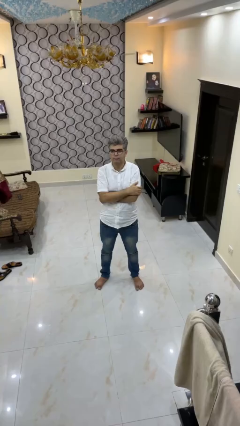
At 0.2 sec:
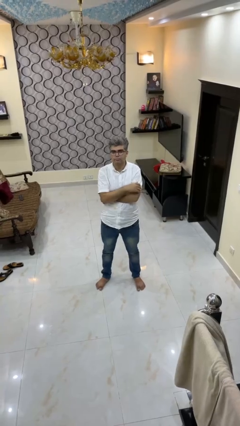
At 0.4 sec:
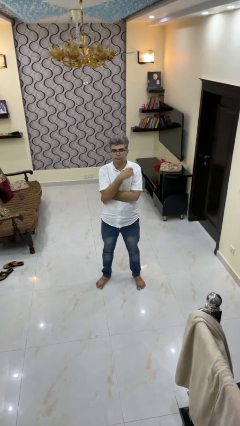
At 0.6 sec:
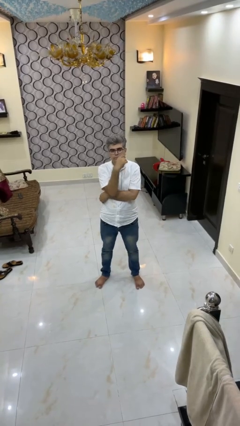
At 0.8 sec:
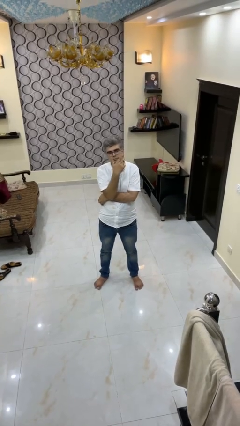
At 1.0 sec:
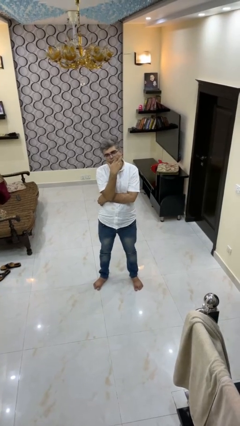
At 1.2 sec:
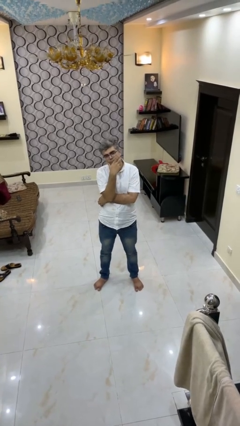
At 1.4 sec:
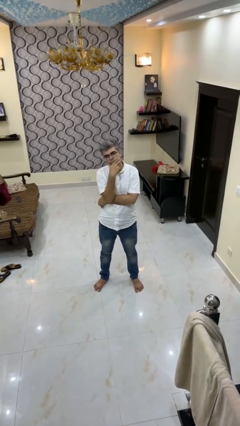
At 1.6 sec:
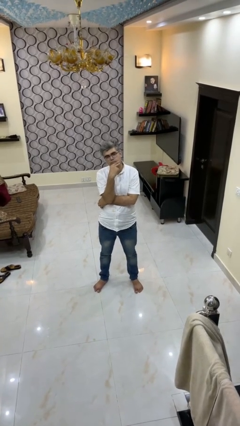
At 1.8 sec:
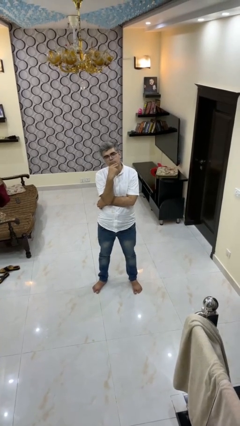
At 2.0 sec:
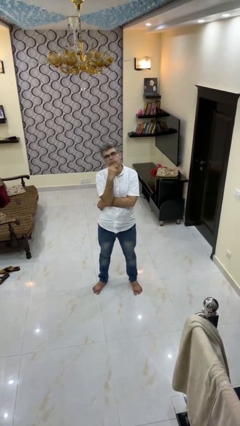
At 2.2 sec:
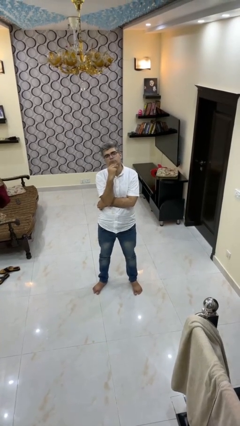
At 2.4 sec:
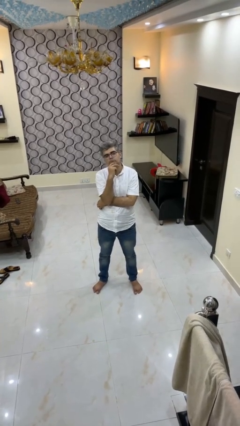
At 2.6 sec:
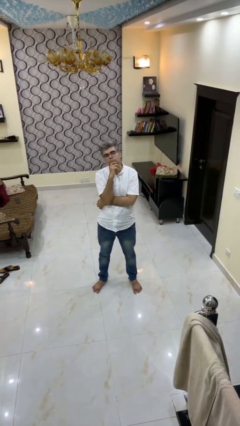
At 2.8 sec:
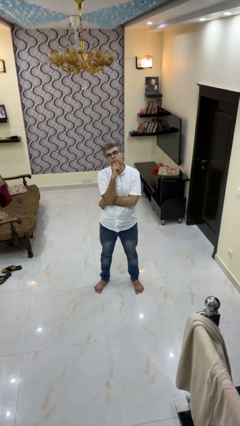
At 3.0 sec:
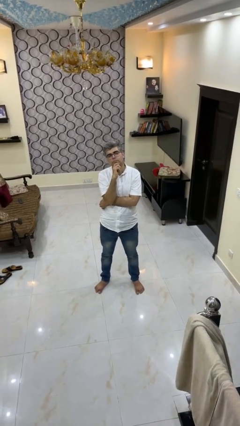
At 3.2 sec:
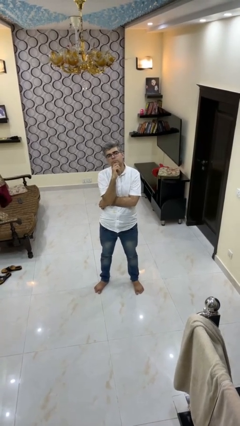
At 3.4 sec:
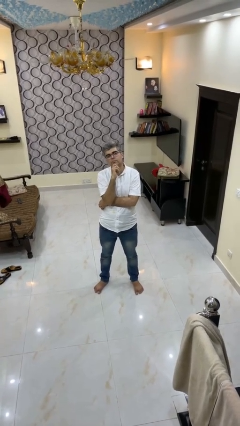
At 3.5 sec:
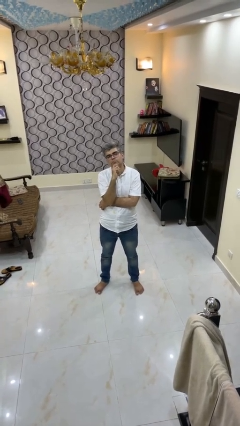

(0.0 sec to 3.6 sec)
person strokes chin

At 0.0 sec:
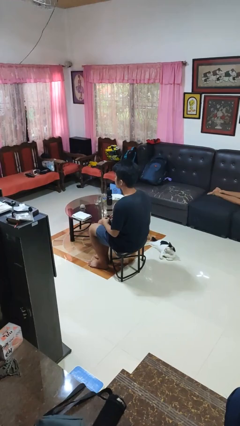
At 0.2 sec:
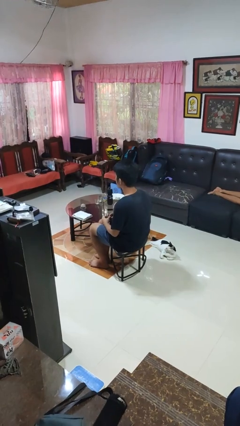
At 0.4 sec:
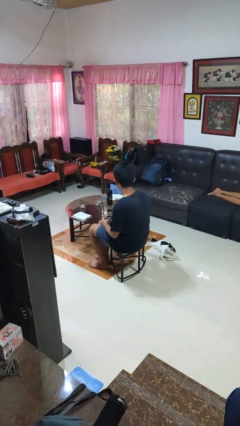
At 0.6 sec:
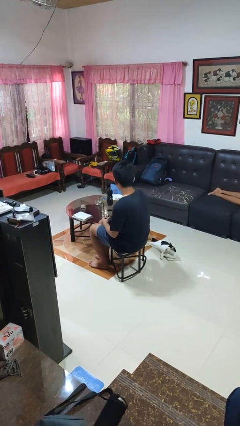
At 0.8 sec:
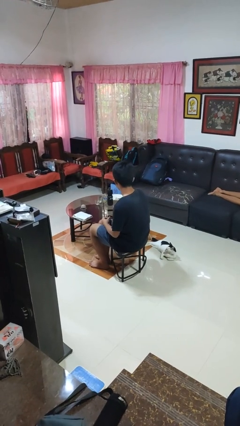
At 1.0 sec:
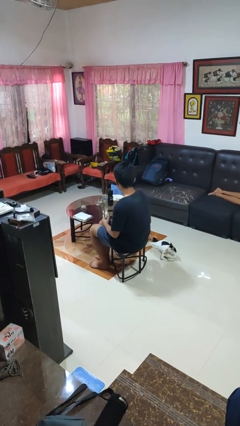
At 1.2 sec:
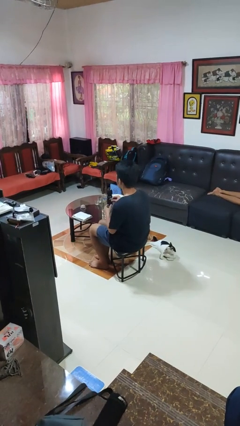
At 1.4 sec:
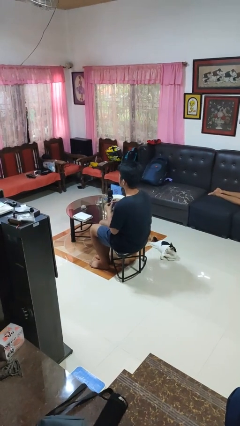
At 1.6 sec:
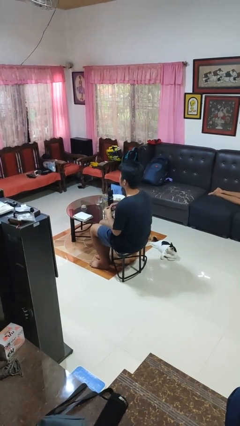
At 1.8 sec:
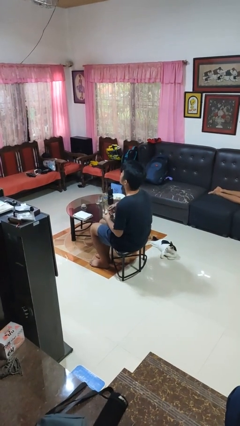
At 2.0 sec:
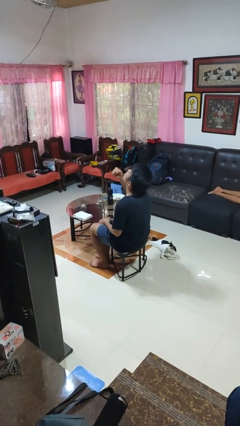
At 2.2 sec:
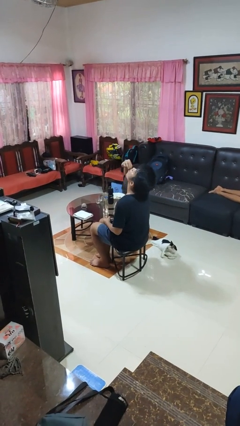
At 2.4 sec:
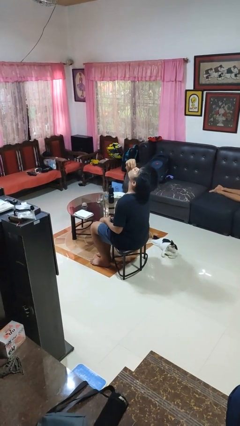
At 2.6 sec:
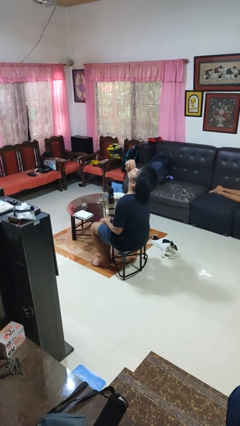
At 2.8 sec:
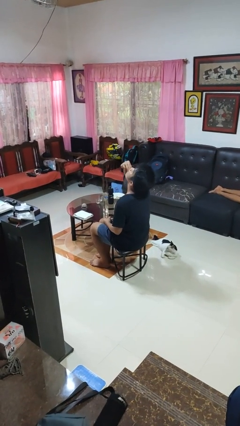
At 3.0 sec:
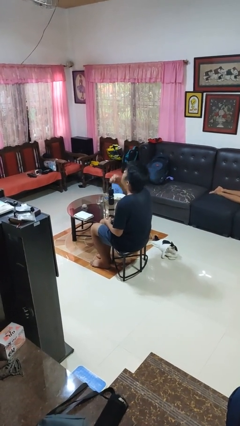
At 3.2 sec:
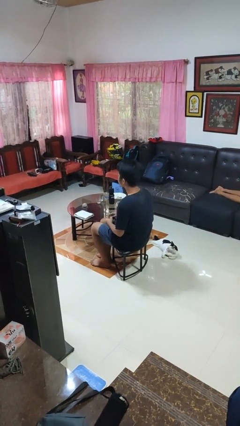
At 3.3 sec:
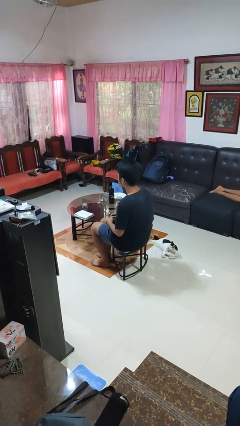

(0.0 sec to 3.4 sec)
person takes medicine pills

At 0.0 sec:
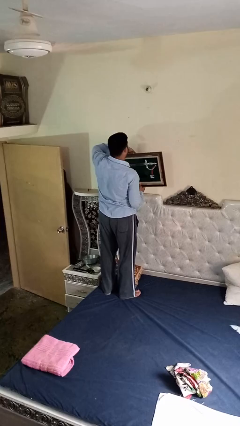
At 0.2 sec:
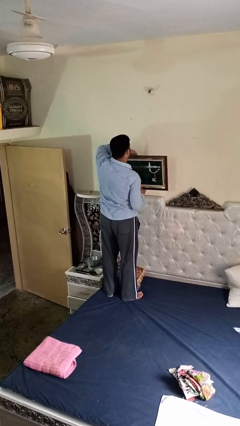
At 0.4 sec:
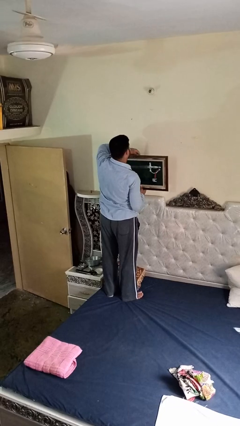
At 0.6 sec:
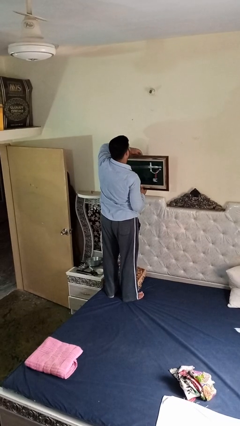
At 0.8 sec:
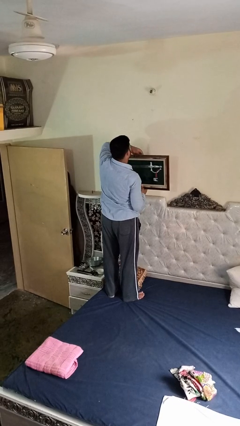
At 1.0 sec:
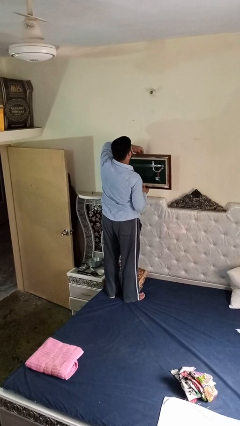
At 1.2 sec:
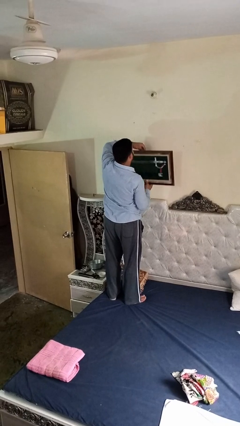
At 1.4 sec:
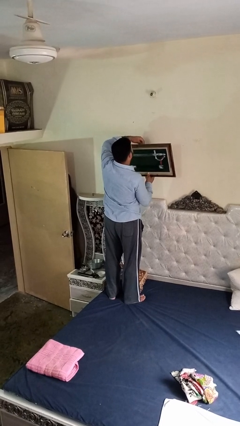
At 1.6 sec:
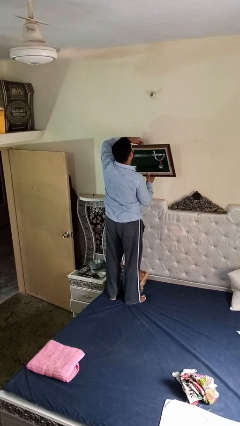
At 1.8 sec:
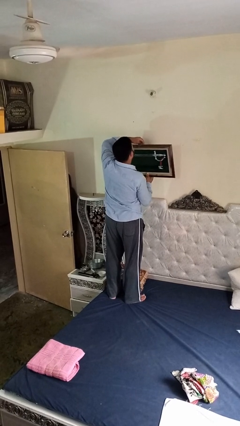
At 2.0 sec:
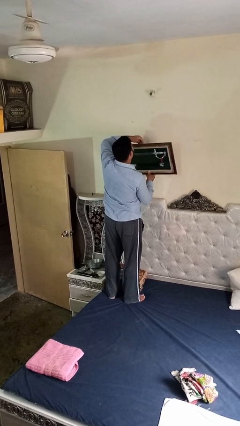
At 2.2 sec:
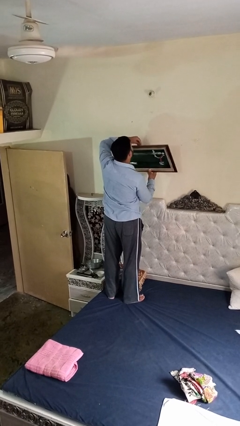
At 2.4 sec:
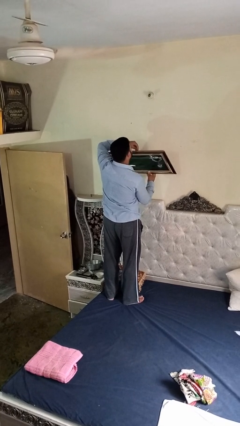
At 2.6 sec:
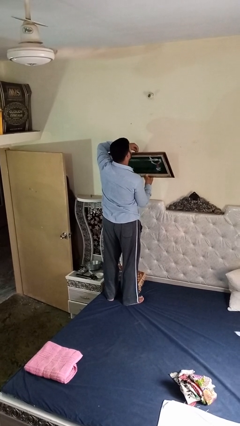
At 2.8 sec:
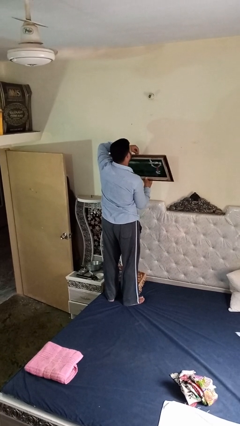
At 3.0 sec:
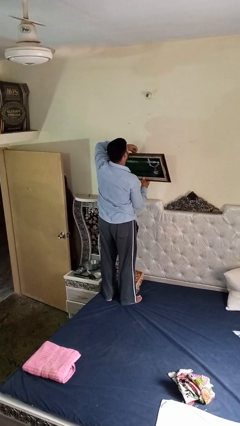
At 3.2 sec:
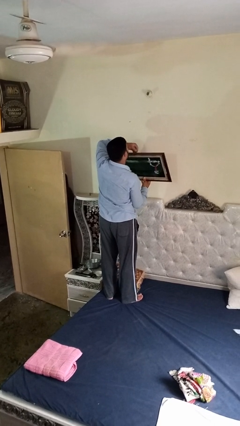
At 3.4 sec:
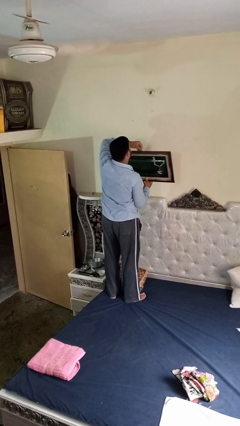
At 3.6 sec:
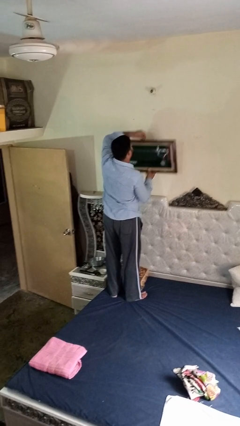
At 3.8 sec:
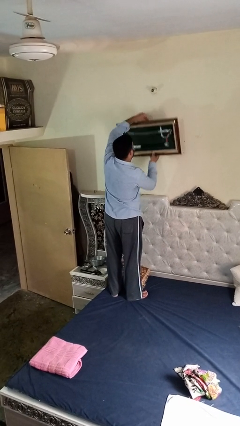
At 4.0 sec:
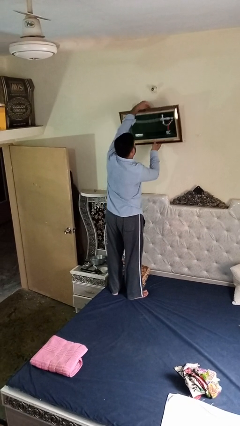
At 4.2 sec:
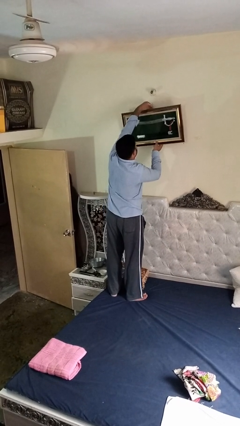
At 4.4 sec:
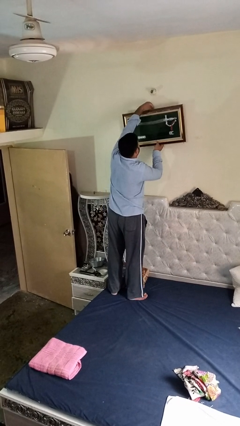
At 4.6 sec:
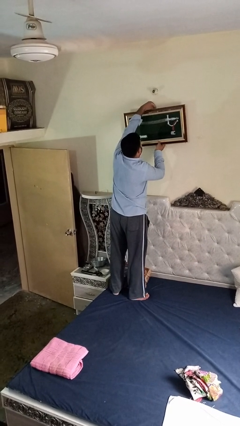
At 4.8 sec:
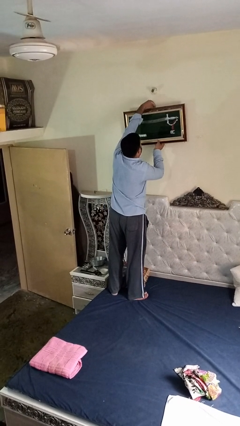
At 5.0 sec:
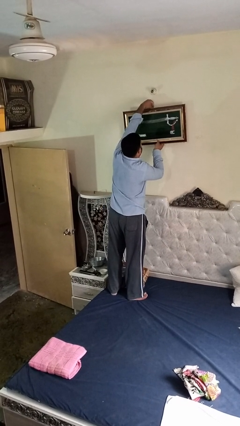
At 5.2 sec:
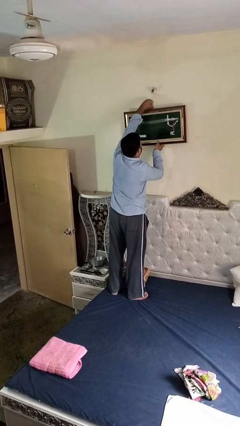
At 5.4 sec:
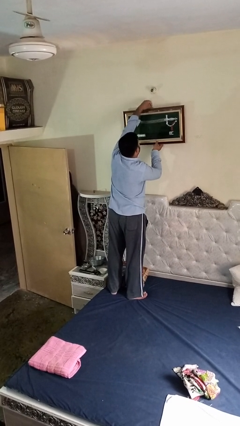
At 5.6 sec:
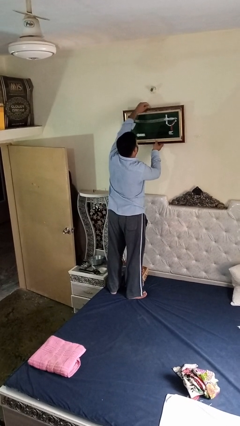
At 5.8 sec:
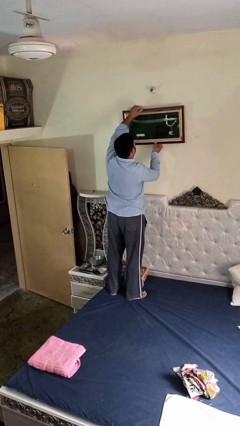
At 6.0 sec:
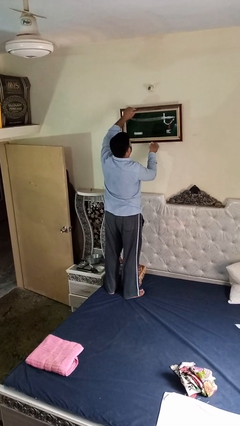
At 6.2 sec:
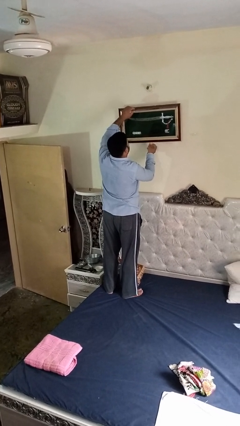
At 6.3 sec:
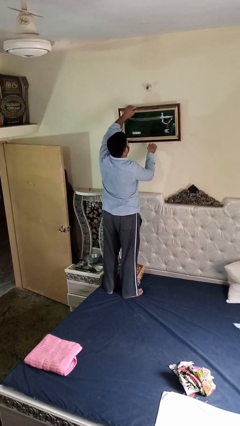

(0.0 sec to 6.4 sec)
person puts up picture frame

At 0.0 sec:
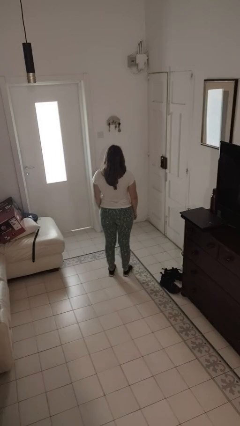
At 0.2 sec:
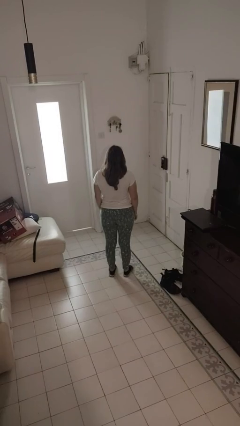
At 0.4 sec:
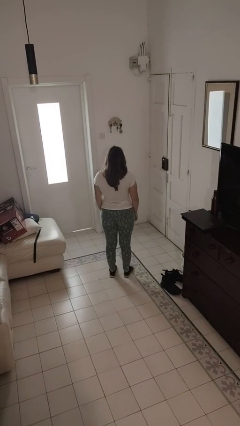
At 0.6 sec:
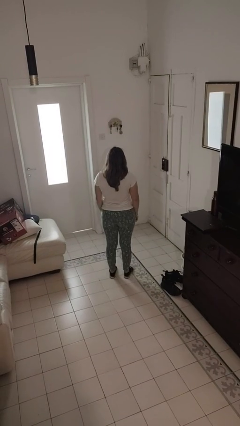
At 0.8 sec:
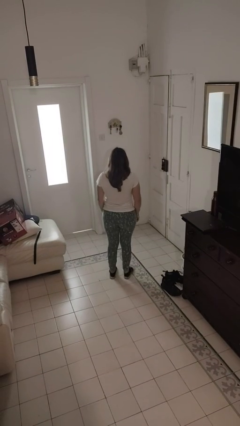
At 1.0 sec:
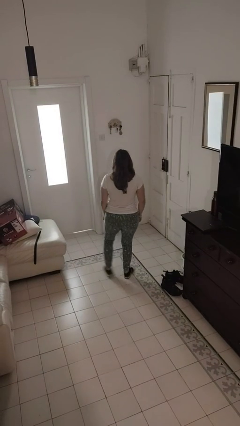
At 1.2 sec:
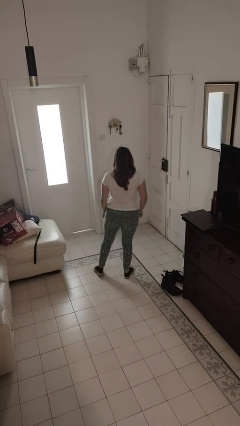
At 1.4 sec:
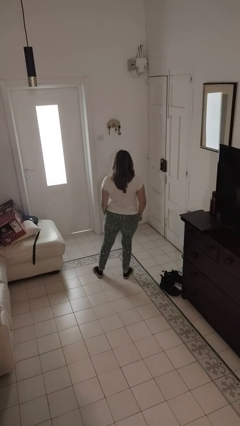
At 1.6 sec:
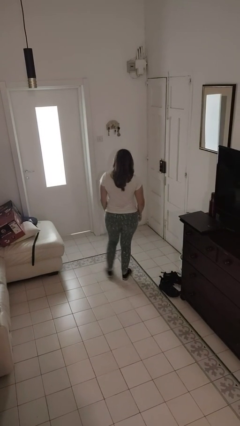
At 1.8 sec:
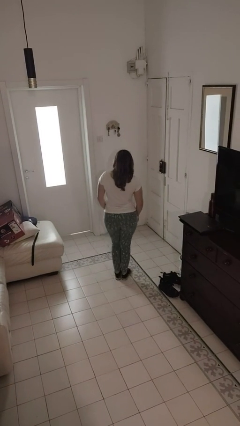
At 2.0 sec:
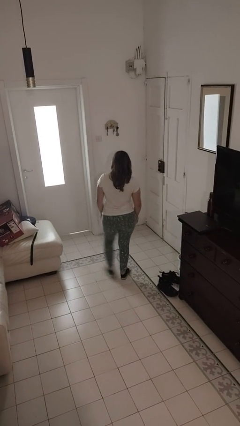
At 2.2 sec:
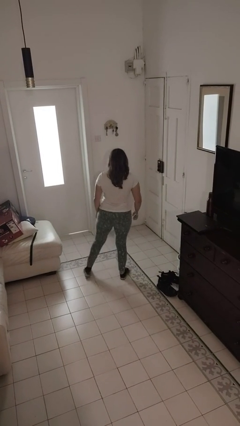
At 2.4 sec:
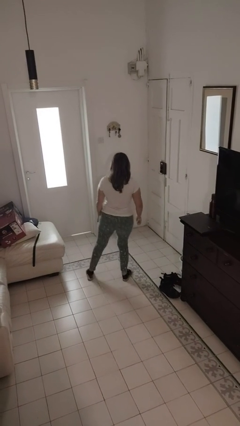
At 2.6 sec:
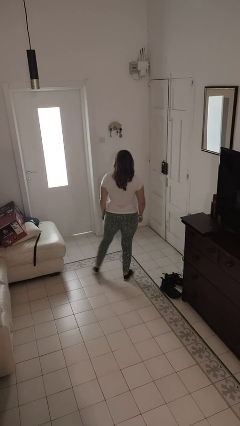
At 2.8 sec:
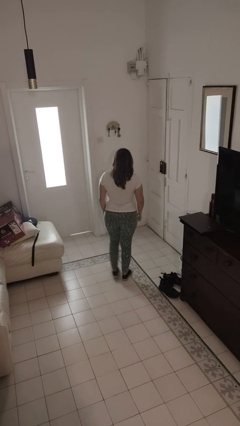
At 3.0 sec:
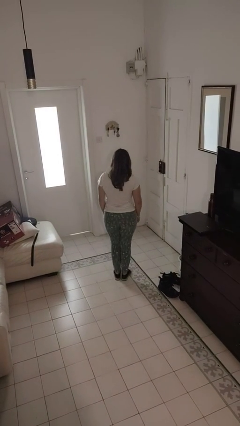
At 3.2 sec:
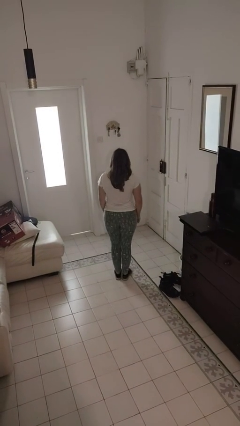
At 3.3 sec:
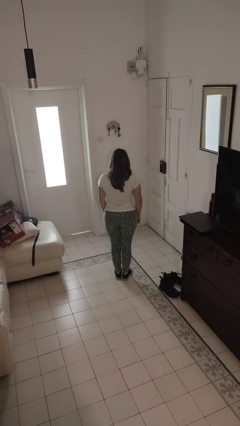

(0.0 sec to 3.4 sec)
person dances in place

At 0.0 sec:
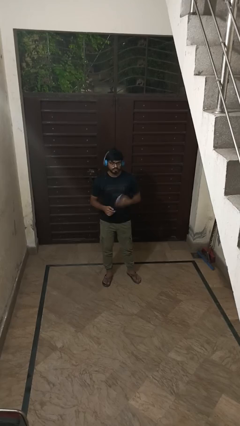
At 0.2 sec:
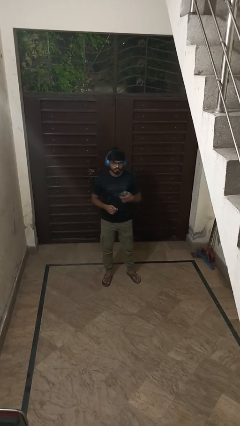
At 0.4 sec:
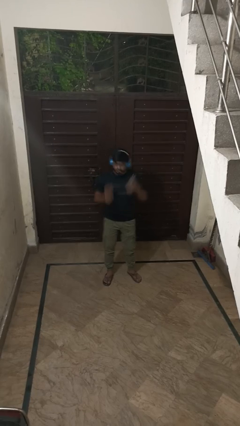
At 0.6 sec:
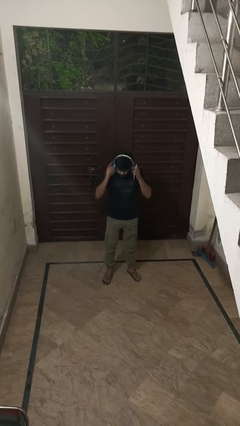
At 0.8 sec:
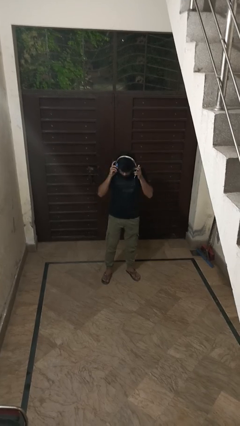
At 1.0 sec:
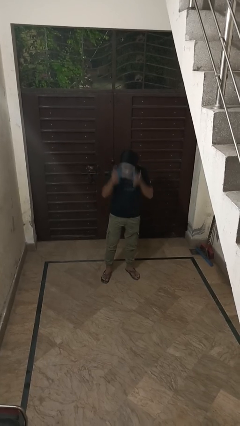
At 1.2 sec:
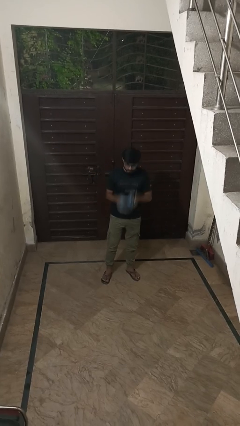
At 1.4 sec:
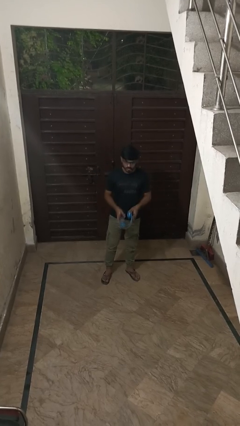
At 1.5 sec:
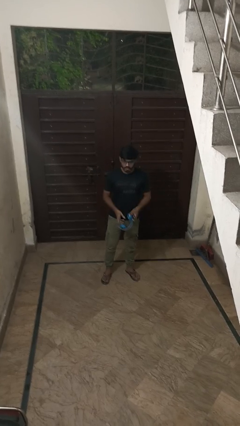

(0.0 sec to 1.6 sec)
person takes off headphones
